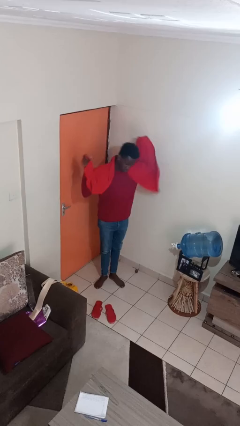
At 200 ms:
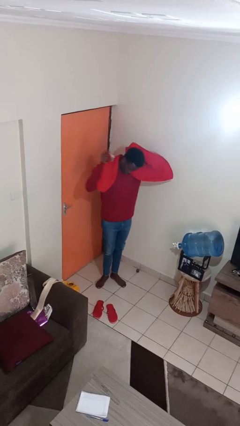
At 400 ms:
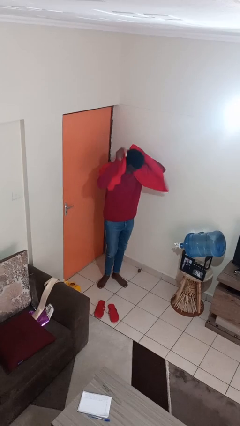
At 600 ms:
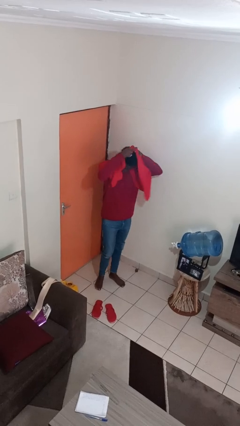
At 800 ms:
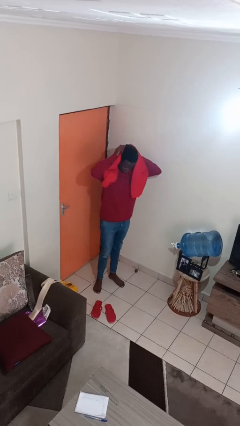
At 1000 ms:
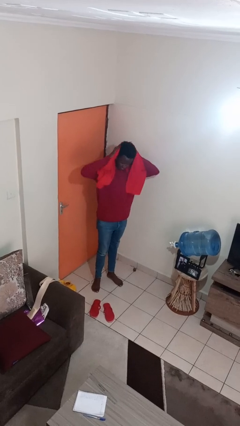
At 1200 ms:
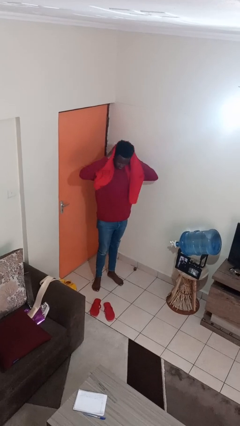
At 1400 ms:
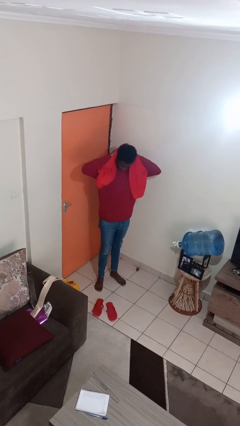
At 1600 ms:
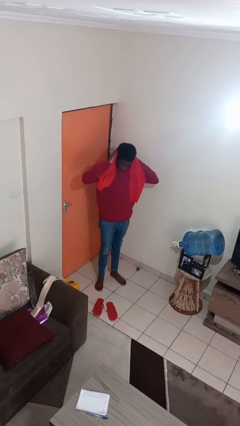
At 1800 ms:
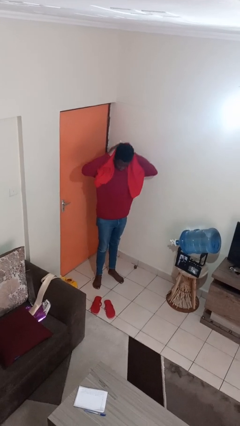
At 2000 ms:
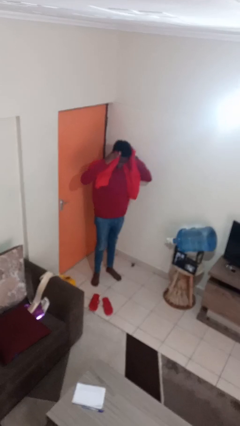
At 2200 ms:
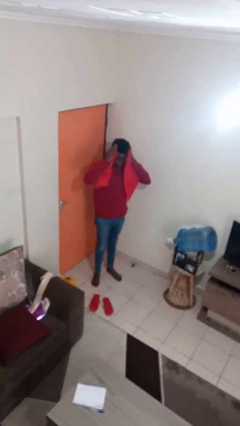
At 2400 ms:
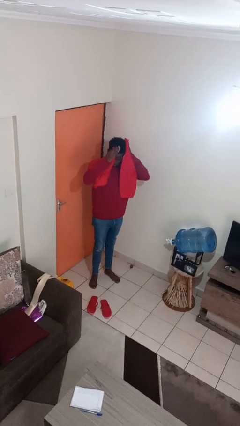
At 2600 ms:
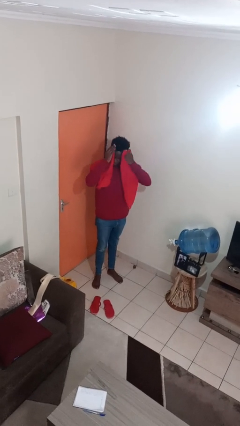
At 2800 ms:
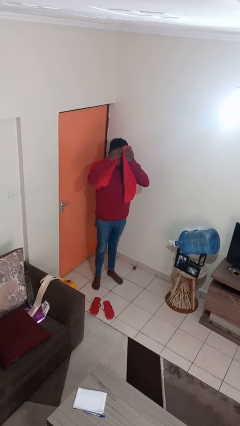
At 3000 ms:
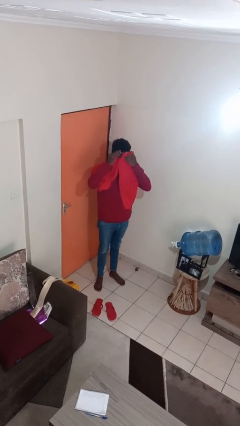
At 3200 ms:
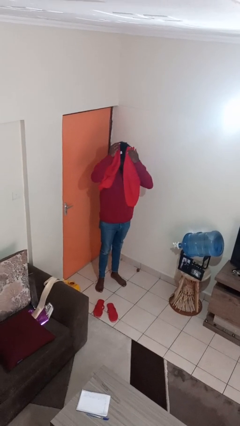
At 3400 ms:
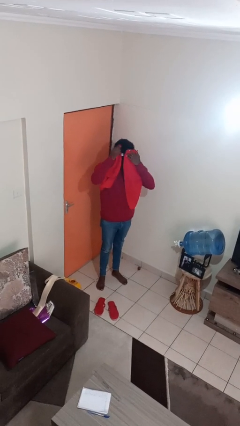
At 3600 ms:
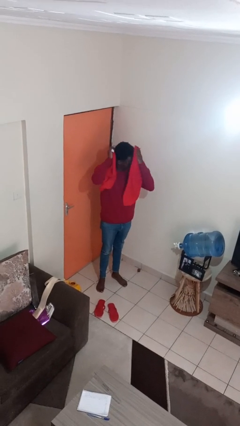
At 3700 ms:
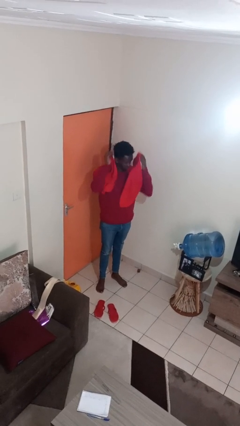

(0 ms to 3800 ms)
person dries hair with towel

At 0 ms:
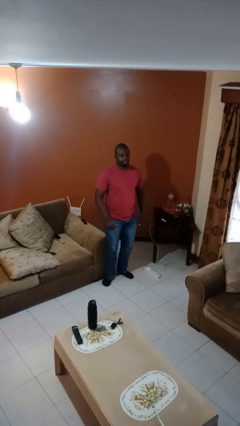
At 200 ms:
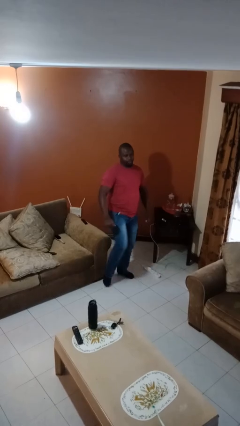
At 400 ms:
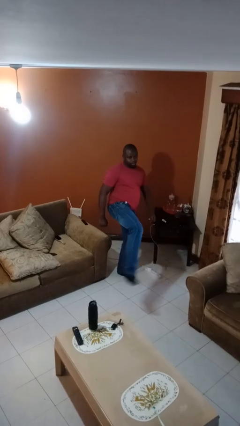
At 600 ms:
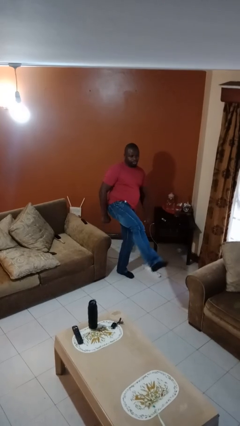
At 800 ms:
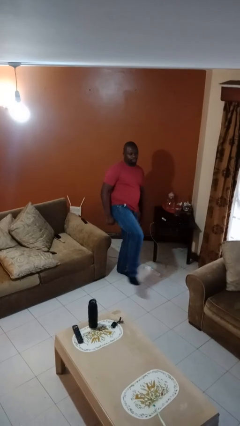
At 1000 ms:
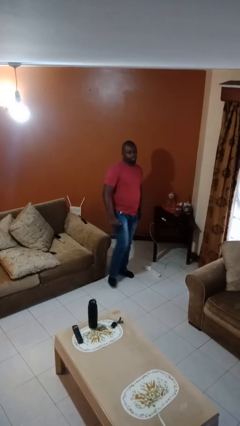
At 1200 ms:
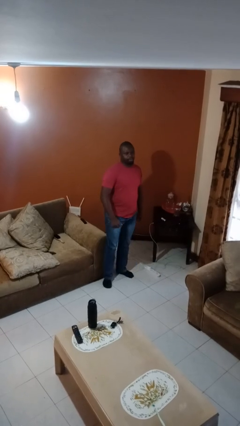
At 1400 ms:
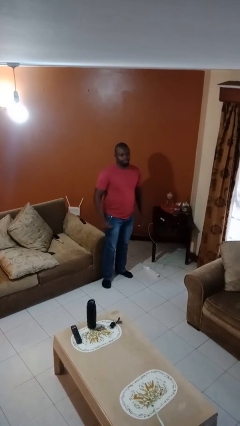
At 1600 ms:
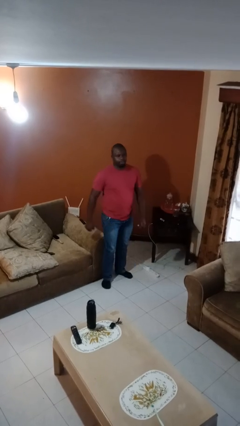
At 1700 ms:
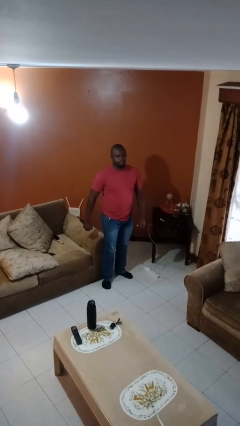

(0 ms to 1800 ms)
person karate kicks

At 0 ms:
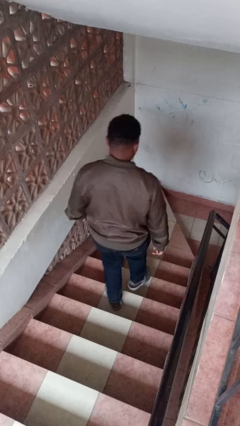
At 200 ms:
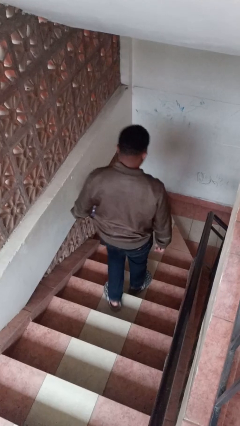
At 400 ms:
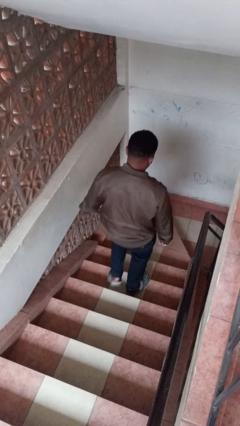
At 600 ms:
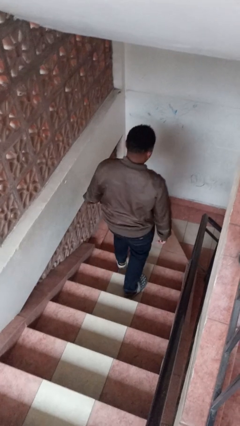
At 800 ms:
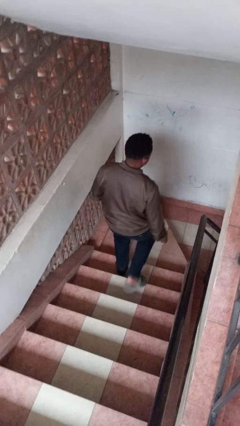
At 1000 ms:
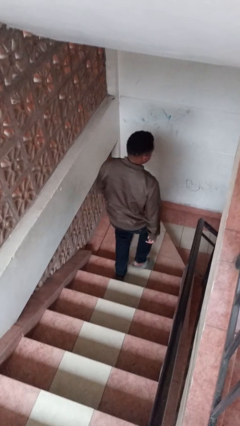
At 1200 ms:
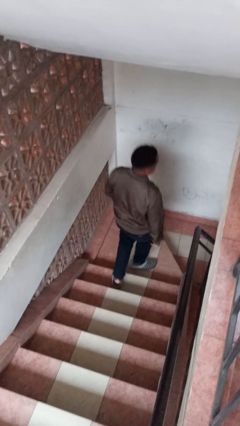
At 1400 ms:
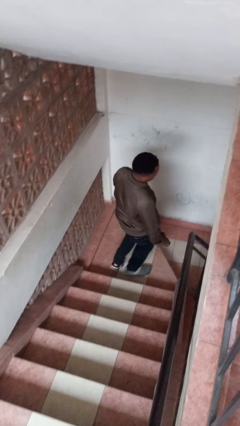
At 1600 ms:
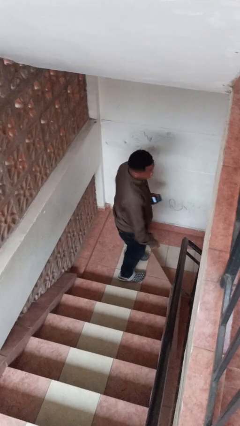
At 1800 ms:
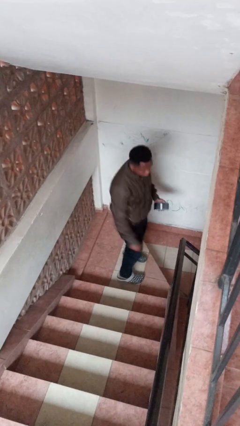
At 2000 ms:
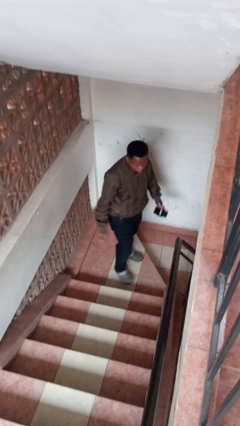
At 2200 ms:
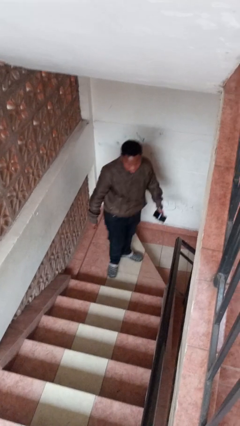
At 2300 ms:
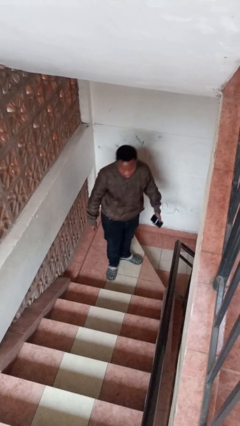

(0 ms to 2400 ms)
person climbs down stairs

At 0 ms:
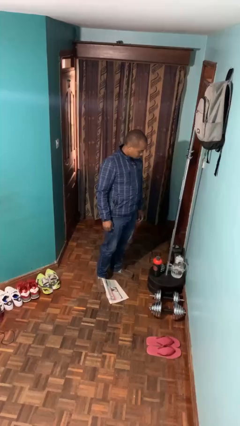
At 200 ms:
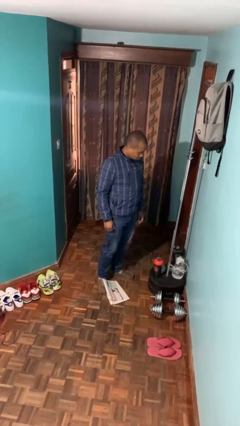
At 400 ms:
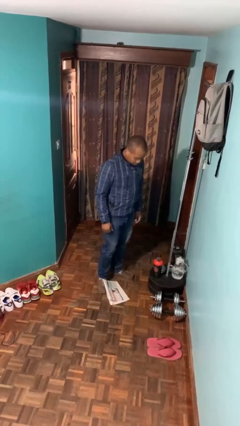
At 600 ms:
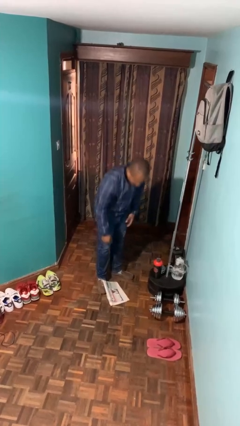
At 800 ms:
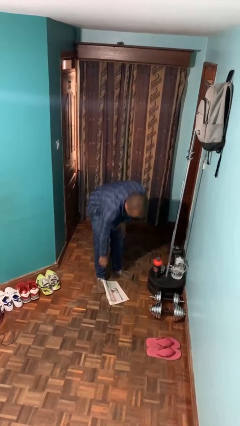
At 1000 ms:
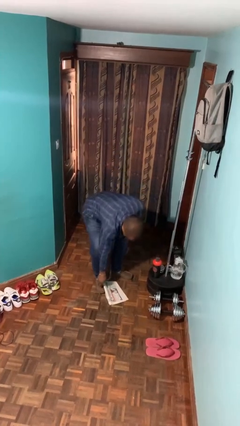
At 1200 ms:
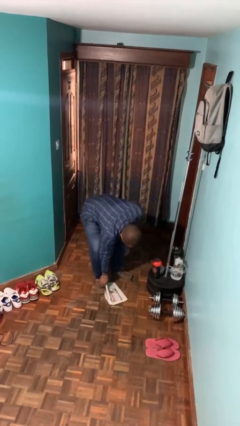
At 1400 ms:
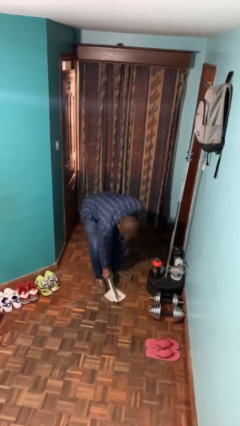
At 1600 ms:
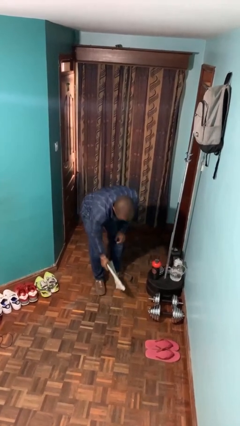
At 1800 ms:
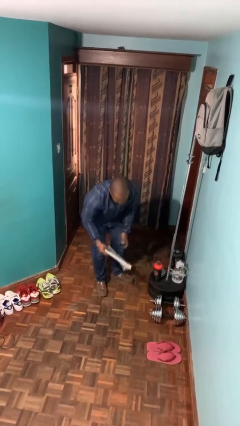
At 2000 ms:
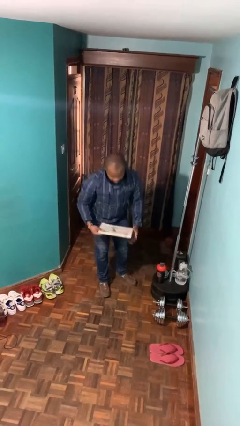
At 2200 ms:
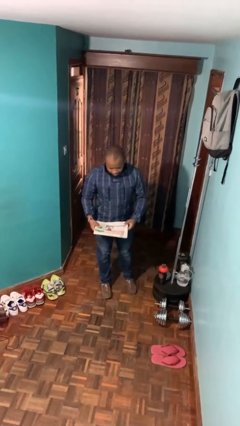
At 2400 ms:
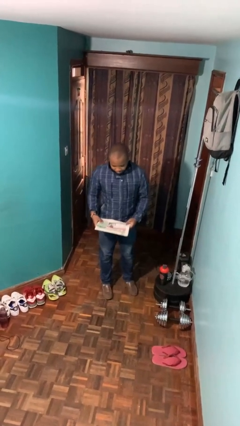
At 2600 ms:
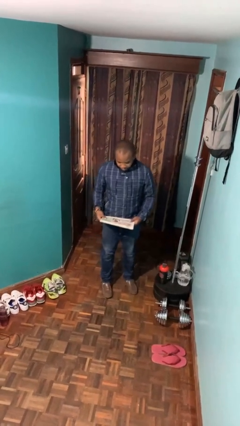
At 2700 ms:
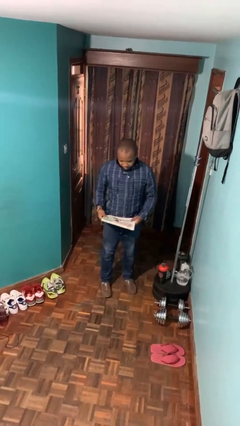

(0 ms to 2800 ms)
person picks up object from floor

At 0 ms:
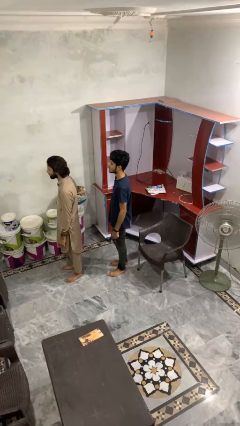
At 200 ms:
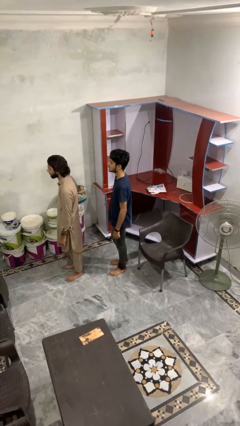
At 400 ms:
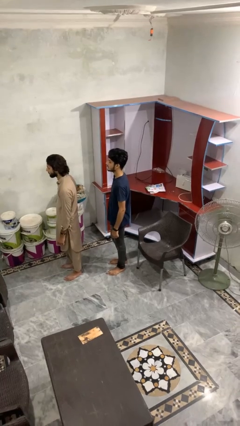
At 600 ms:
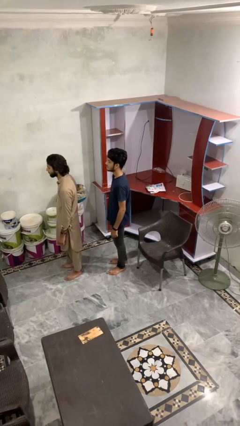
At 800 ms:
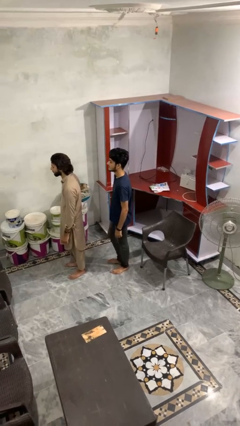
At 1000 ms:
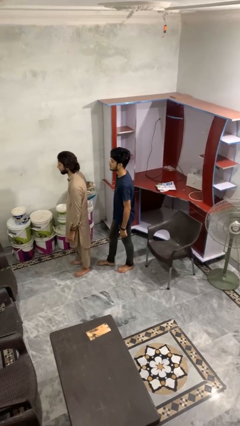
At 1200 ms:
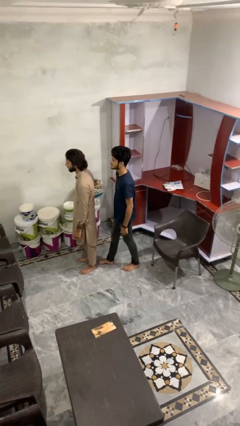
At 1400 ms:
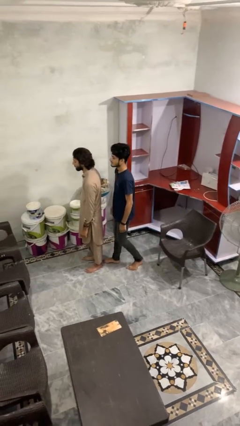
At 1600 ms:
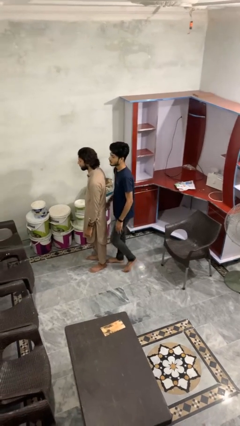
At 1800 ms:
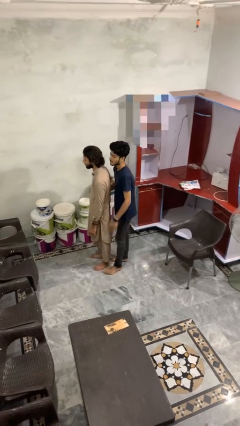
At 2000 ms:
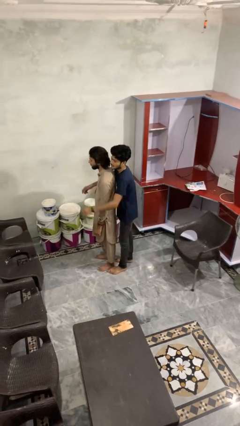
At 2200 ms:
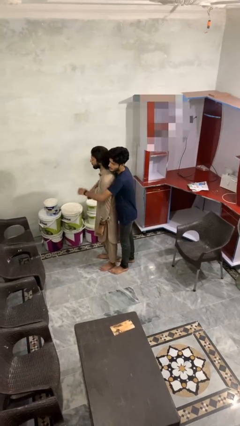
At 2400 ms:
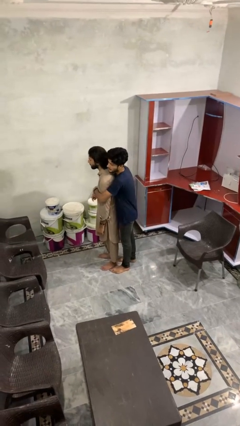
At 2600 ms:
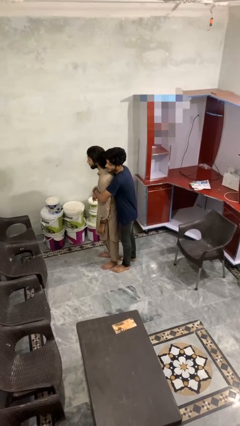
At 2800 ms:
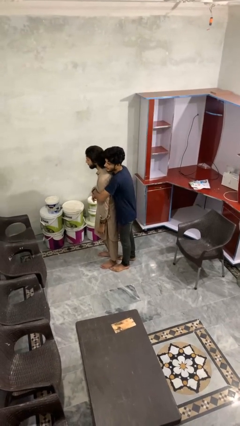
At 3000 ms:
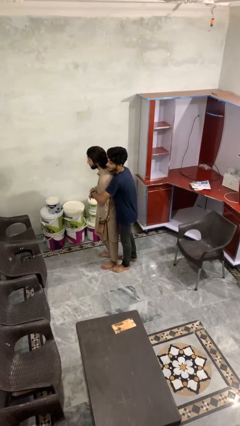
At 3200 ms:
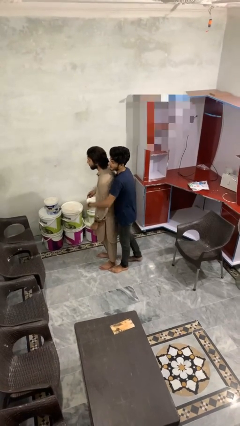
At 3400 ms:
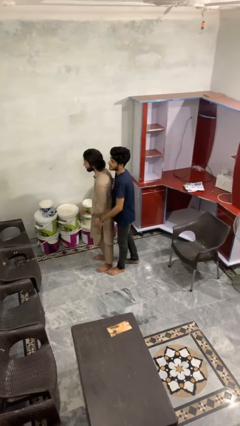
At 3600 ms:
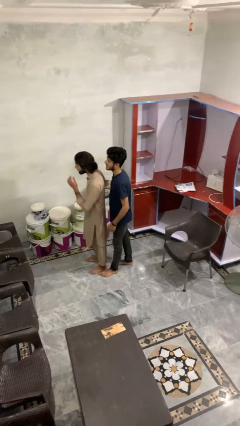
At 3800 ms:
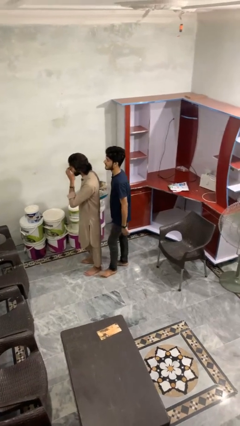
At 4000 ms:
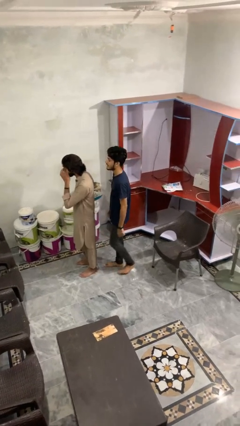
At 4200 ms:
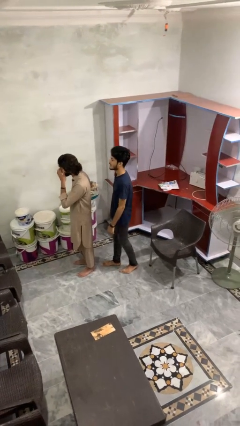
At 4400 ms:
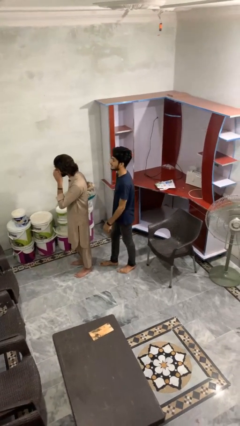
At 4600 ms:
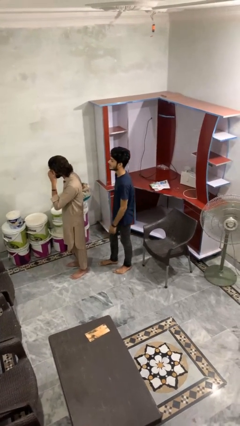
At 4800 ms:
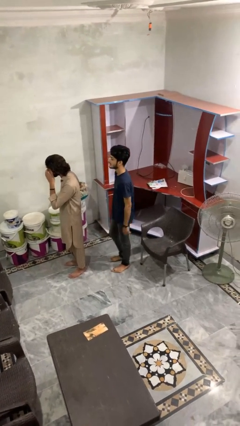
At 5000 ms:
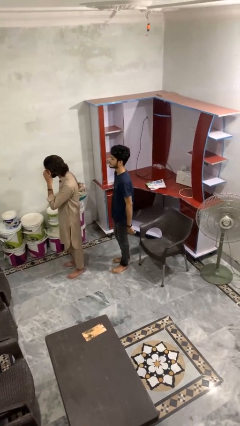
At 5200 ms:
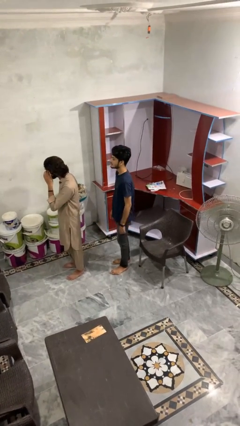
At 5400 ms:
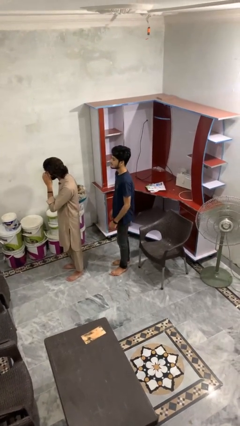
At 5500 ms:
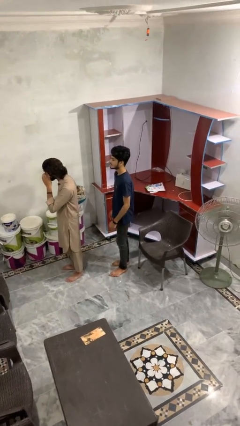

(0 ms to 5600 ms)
person hugs person from behind

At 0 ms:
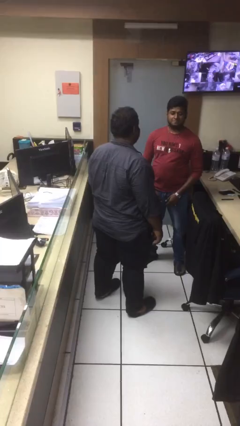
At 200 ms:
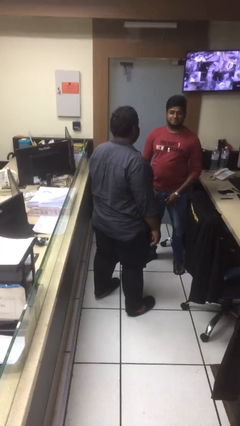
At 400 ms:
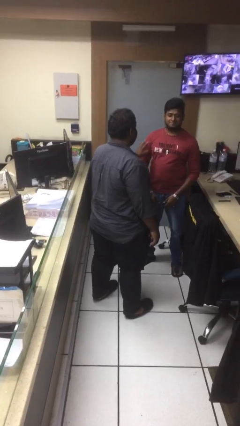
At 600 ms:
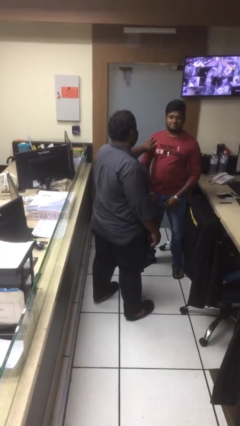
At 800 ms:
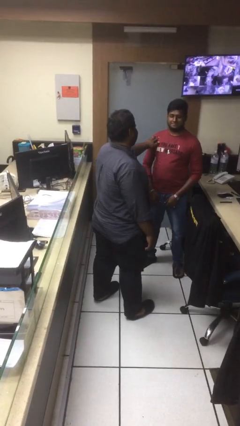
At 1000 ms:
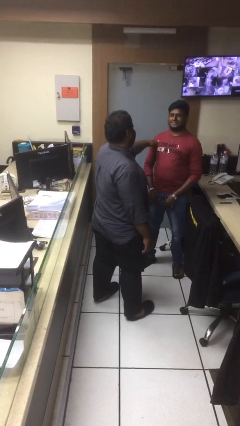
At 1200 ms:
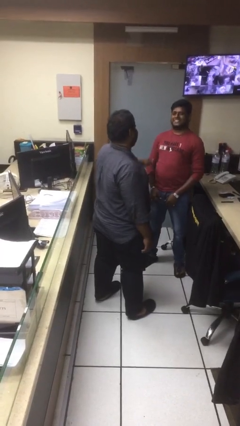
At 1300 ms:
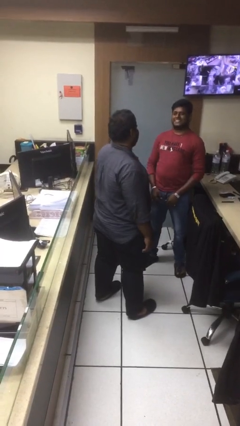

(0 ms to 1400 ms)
person shoves person
